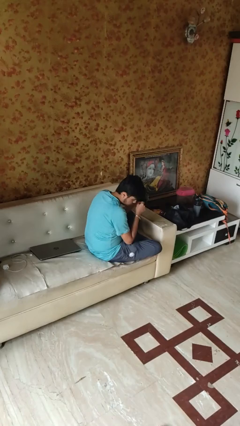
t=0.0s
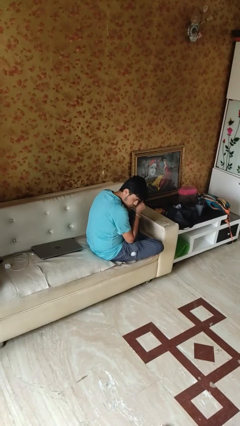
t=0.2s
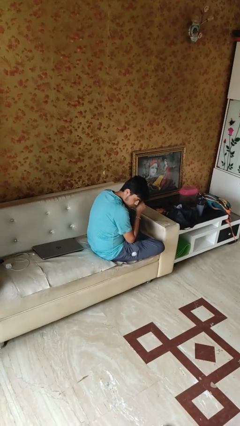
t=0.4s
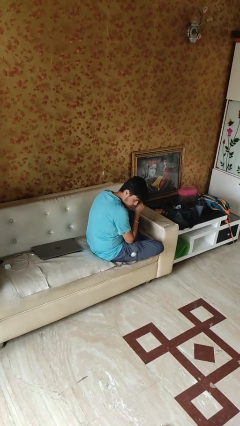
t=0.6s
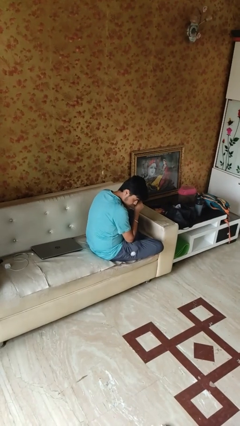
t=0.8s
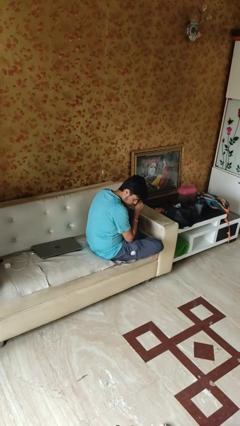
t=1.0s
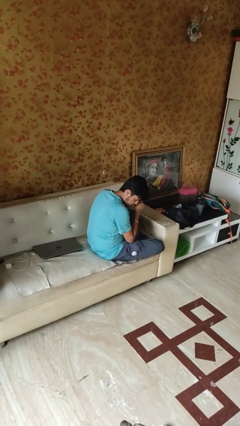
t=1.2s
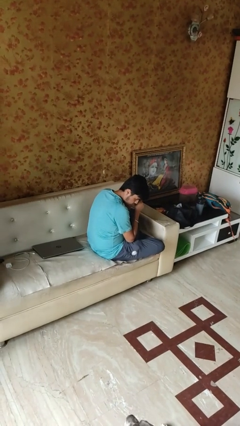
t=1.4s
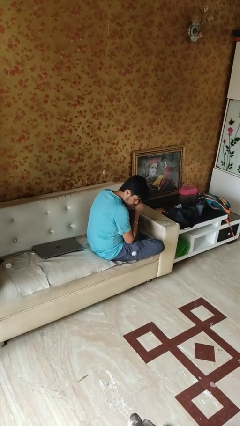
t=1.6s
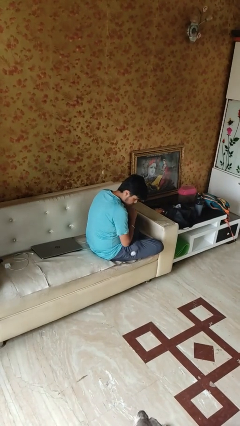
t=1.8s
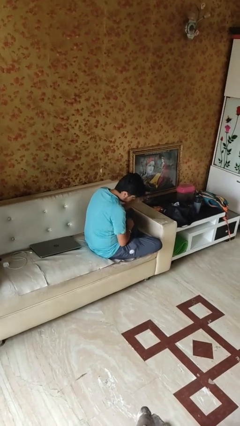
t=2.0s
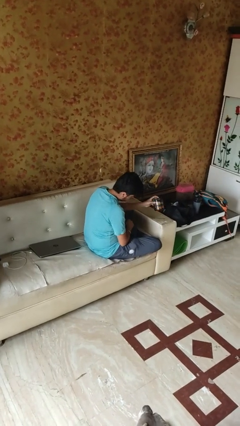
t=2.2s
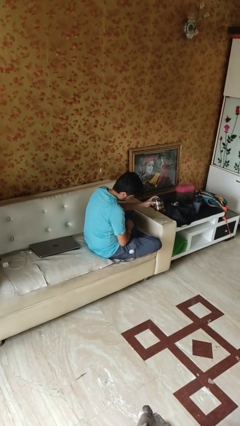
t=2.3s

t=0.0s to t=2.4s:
person taps object with finger

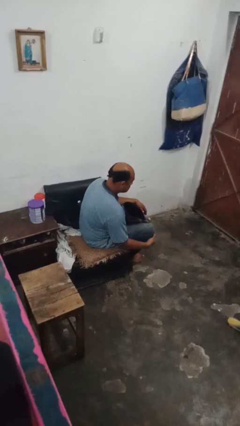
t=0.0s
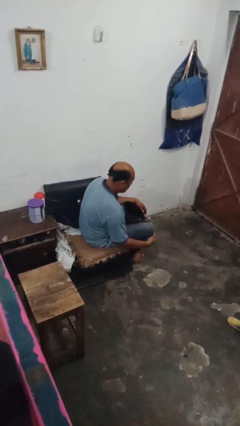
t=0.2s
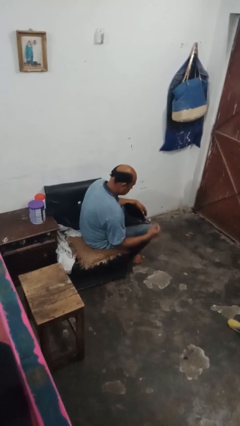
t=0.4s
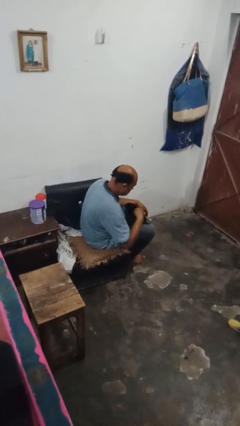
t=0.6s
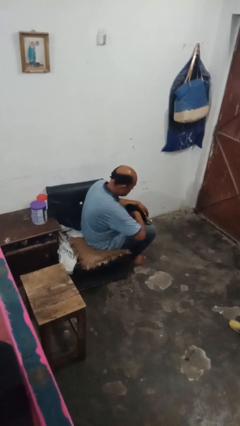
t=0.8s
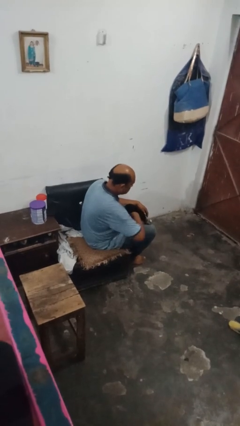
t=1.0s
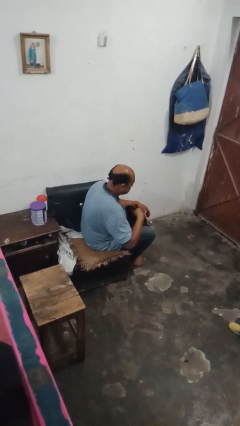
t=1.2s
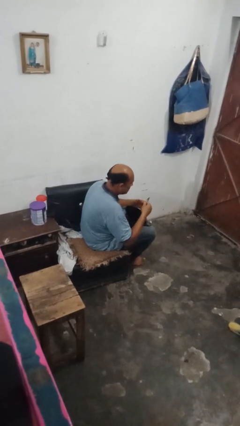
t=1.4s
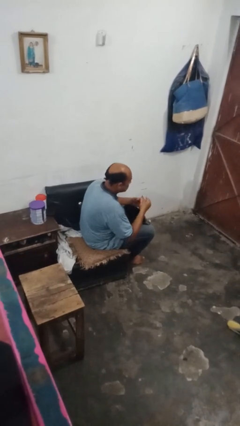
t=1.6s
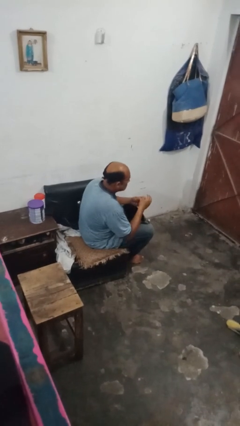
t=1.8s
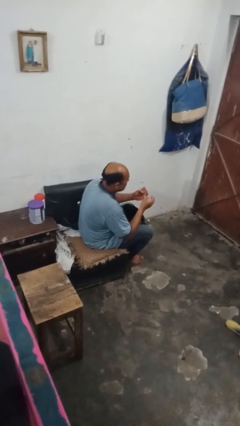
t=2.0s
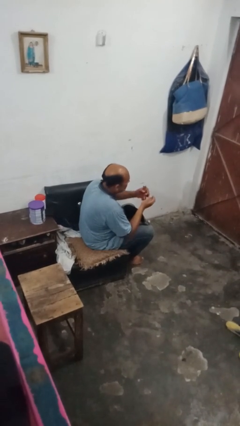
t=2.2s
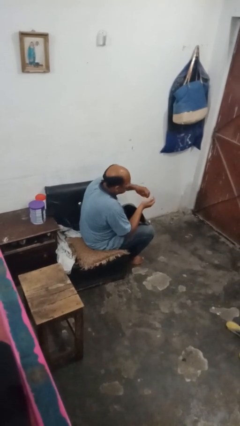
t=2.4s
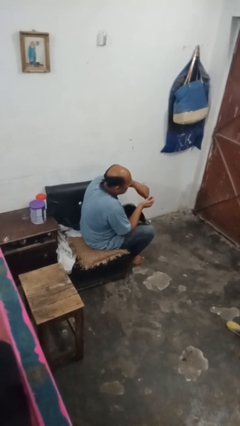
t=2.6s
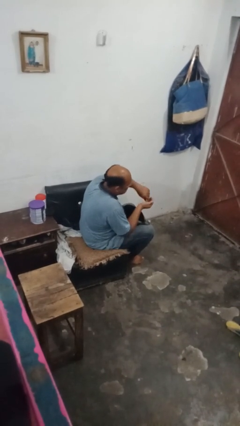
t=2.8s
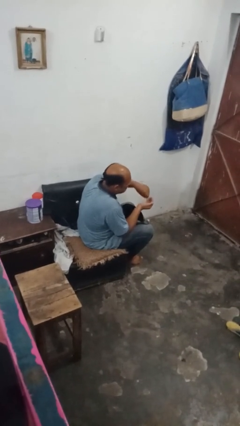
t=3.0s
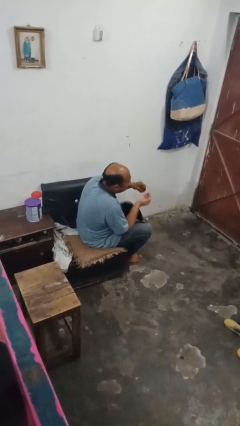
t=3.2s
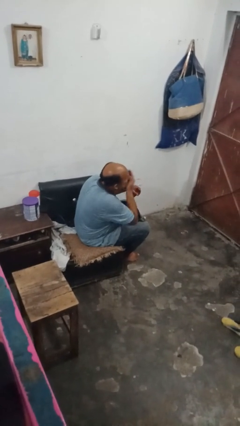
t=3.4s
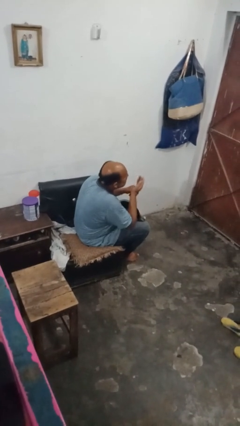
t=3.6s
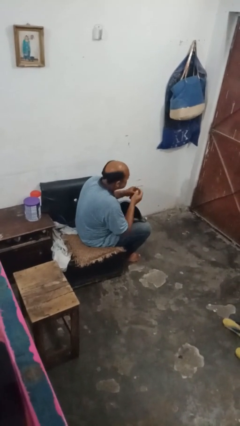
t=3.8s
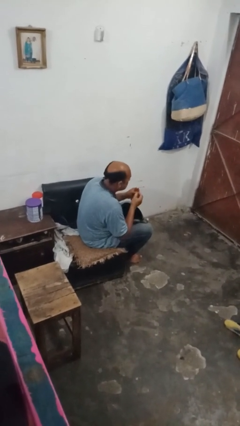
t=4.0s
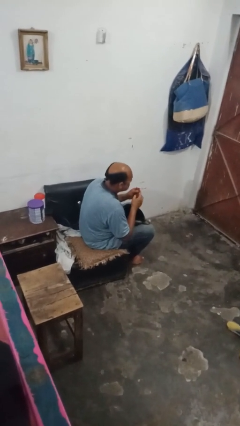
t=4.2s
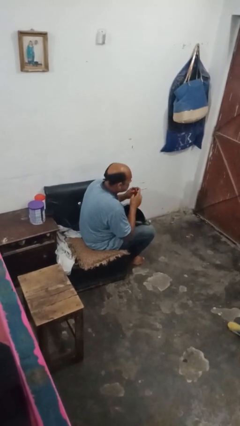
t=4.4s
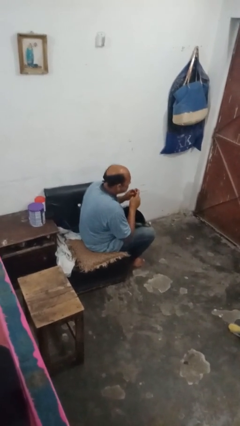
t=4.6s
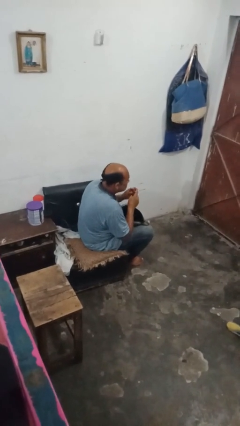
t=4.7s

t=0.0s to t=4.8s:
person eats snack from bag

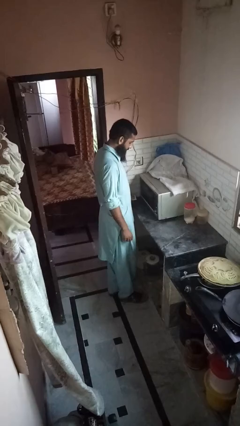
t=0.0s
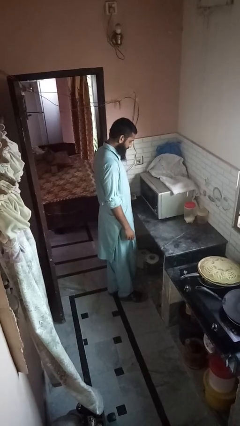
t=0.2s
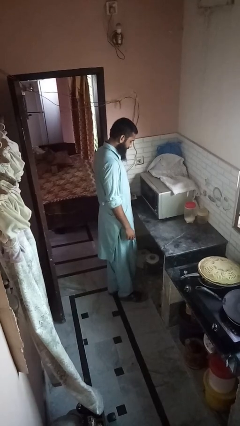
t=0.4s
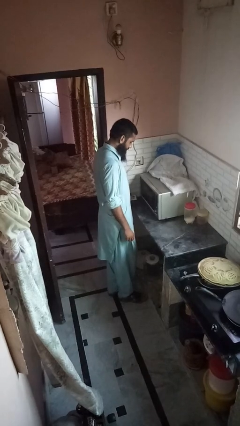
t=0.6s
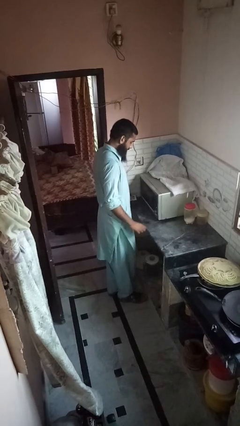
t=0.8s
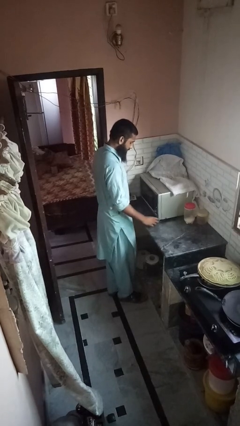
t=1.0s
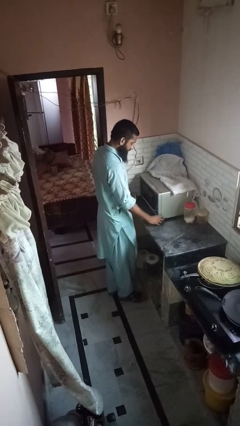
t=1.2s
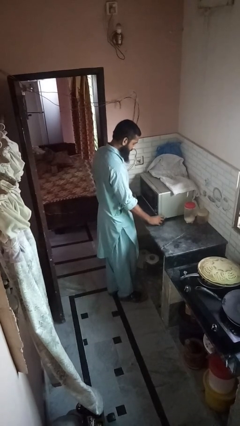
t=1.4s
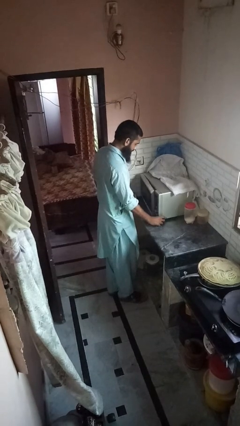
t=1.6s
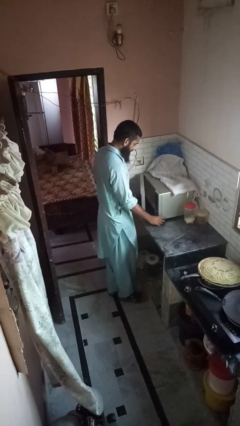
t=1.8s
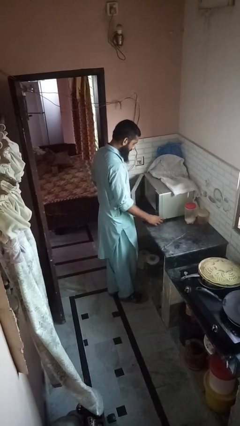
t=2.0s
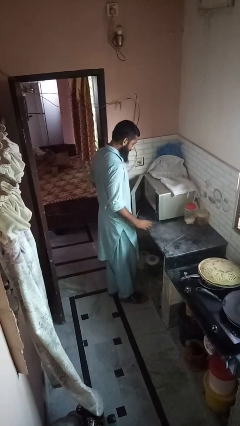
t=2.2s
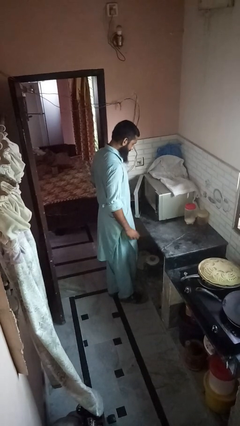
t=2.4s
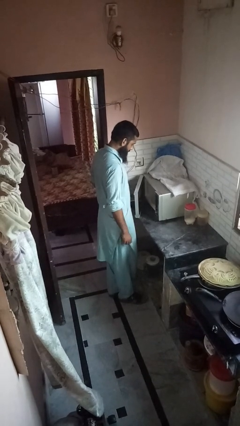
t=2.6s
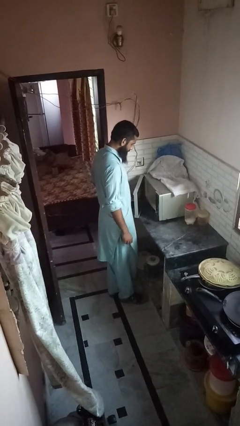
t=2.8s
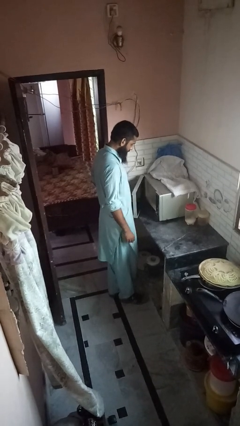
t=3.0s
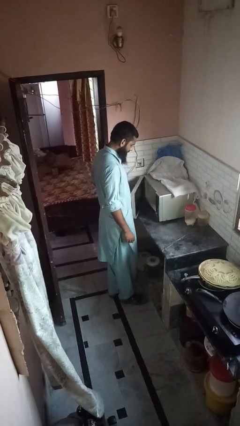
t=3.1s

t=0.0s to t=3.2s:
person opens microwave

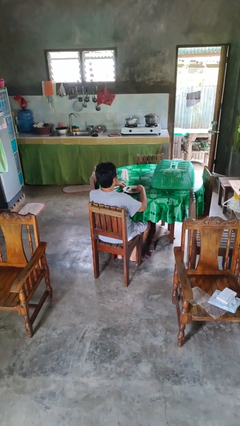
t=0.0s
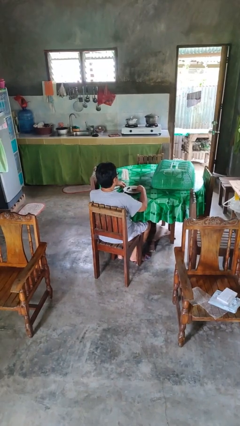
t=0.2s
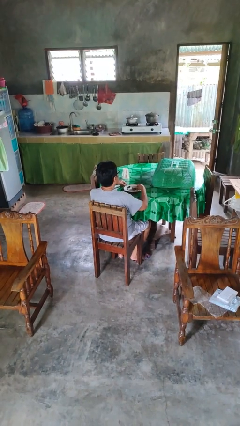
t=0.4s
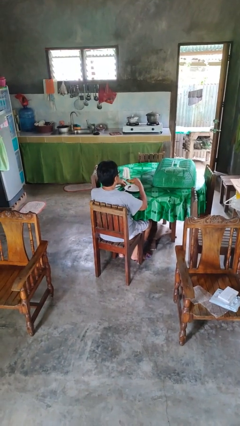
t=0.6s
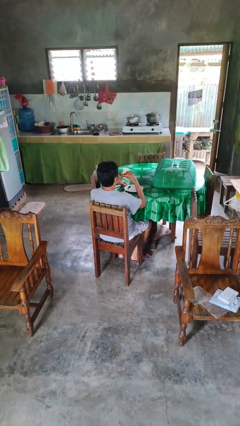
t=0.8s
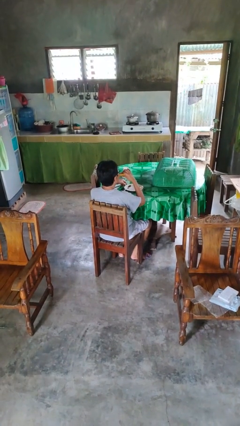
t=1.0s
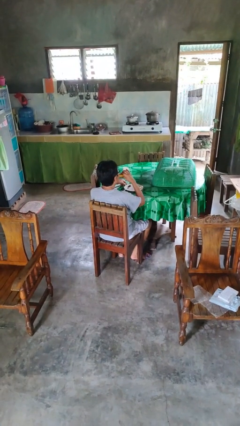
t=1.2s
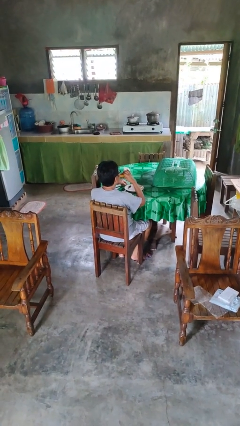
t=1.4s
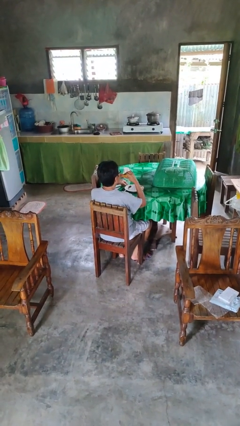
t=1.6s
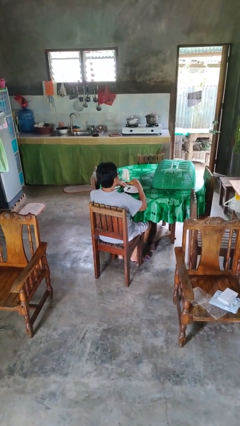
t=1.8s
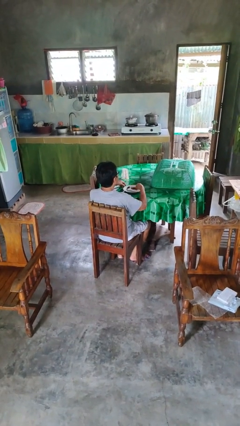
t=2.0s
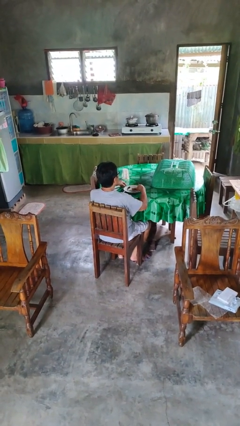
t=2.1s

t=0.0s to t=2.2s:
person eats with hands

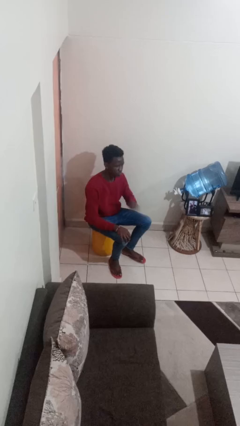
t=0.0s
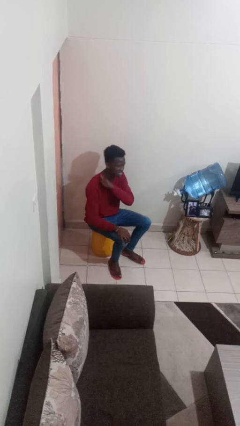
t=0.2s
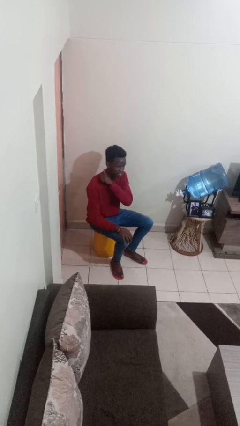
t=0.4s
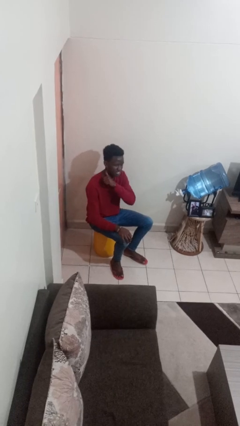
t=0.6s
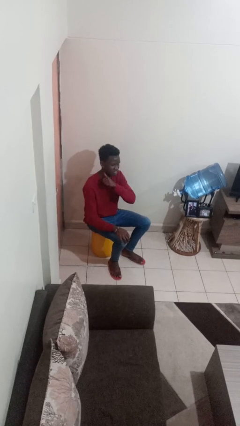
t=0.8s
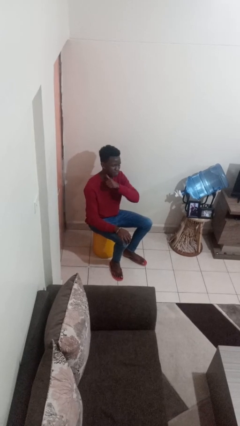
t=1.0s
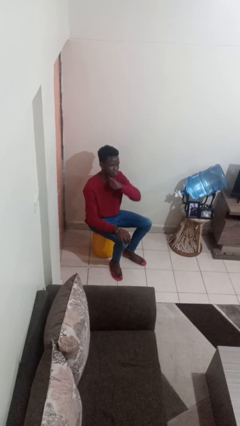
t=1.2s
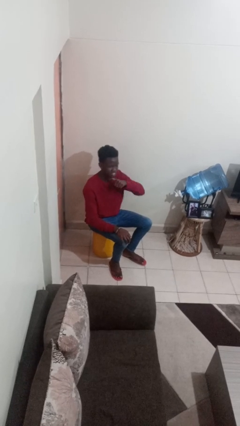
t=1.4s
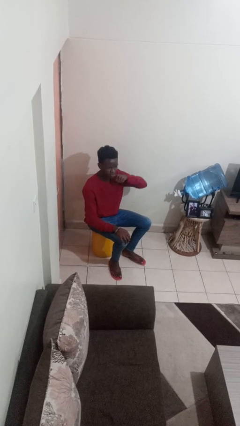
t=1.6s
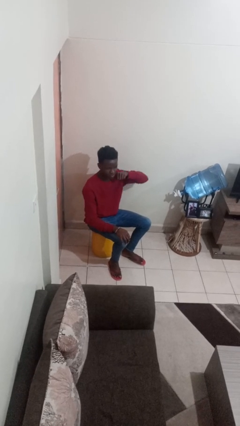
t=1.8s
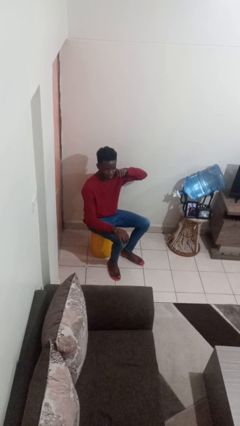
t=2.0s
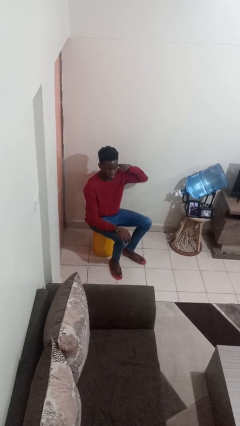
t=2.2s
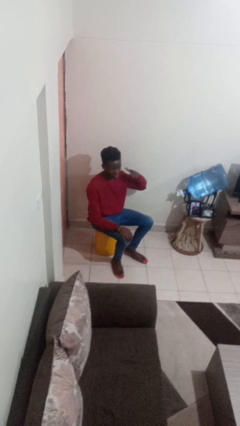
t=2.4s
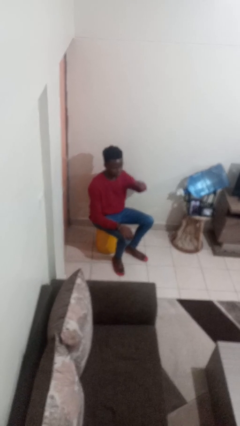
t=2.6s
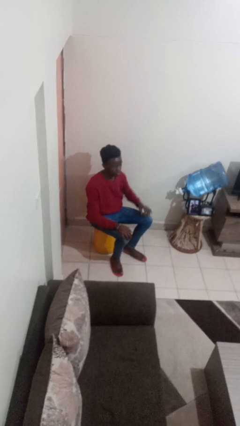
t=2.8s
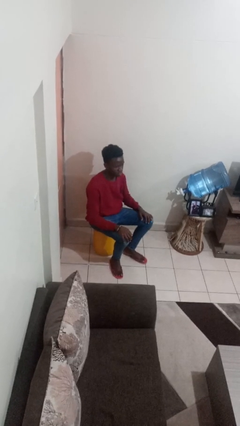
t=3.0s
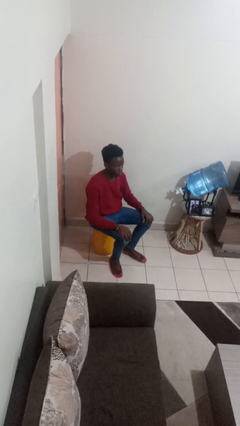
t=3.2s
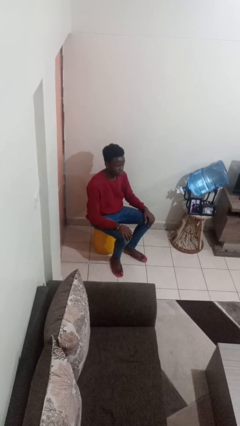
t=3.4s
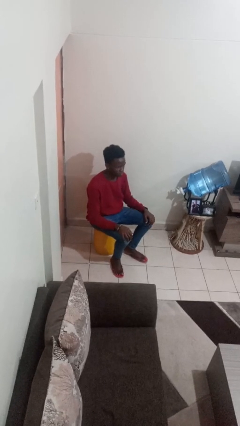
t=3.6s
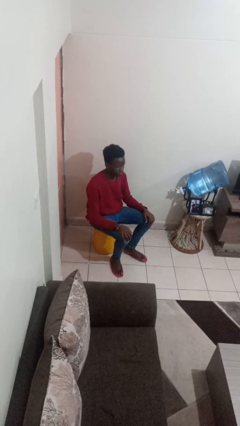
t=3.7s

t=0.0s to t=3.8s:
person gestures cut

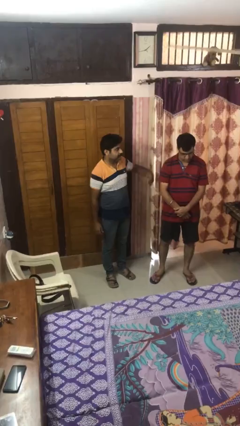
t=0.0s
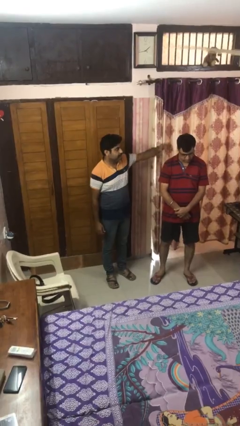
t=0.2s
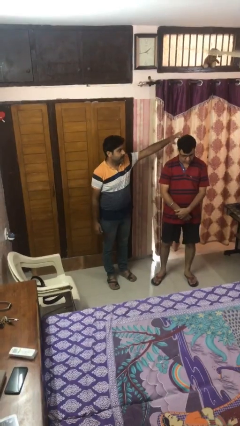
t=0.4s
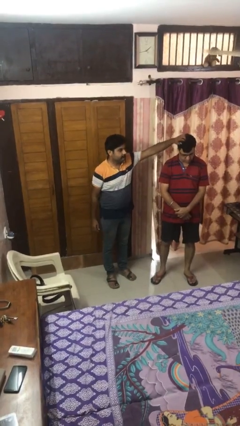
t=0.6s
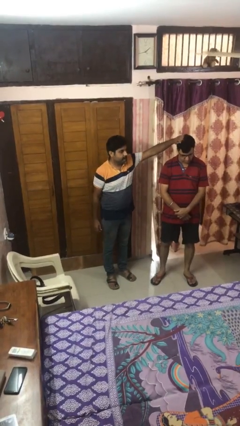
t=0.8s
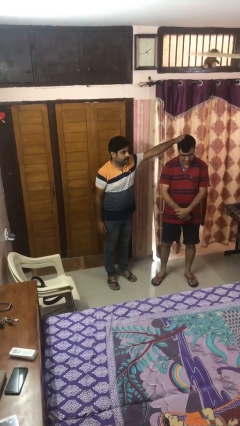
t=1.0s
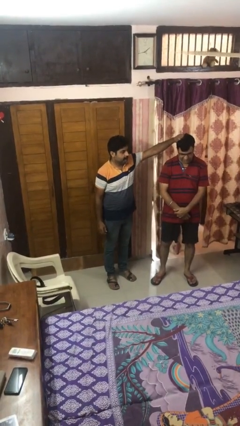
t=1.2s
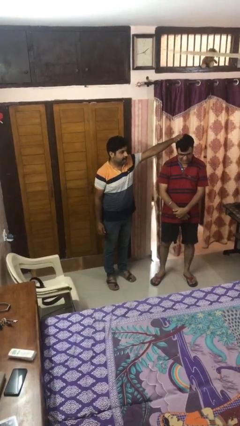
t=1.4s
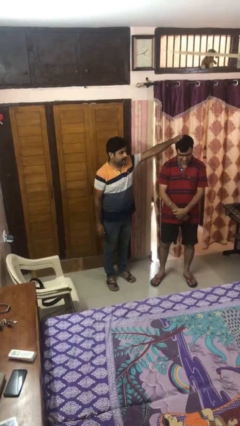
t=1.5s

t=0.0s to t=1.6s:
person grabs person by hair
